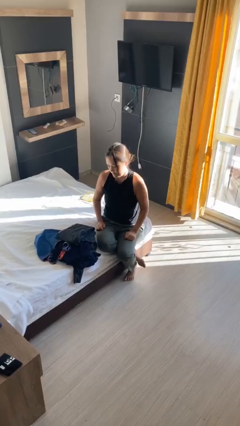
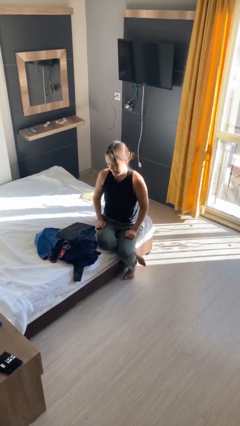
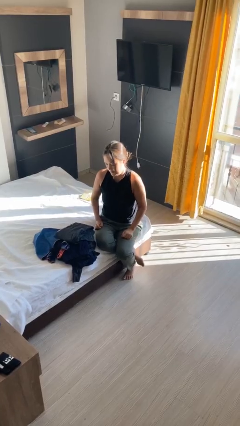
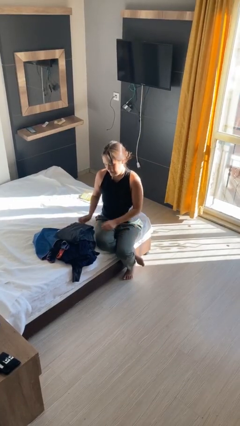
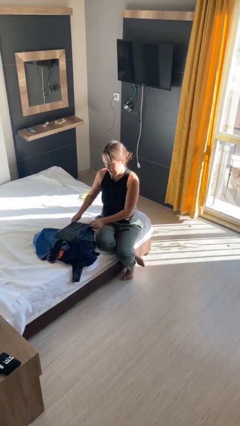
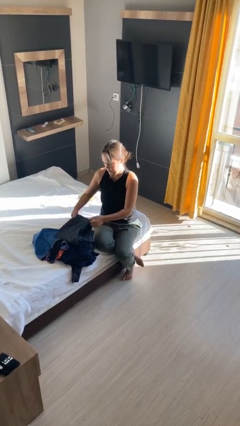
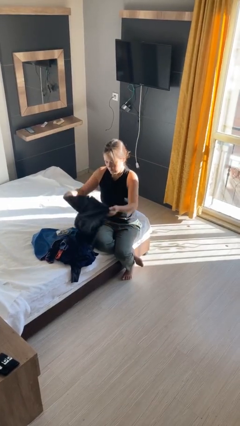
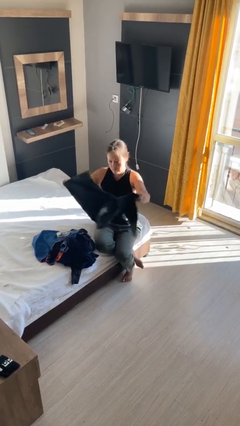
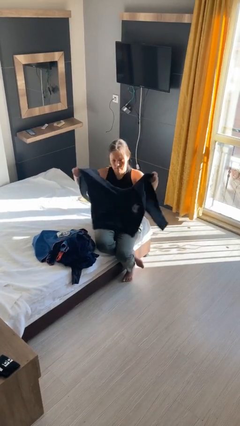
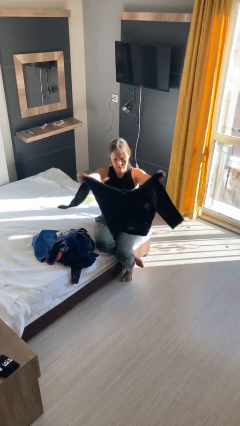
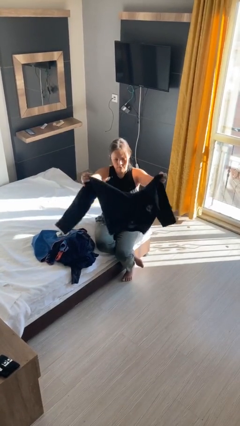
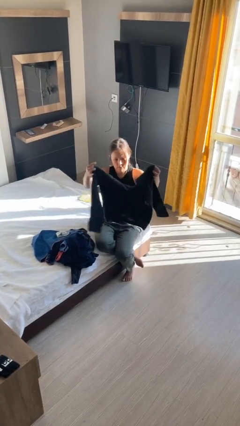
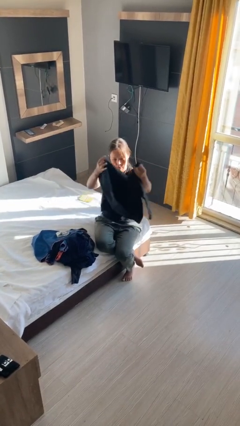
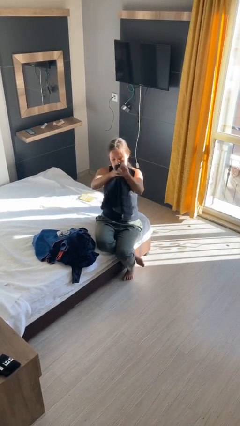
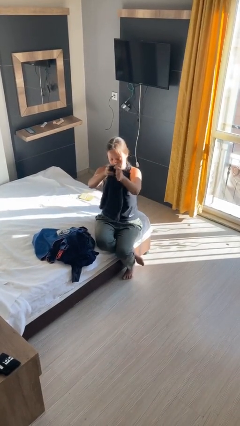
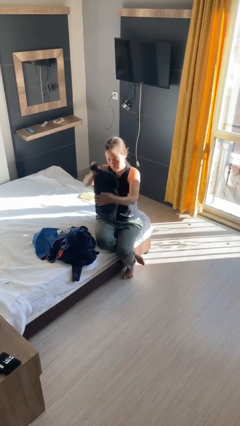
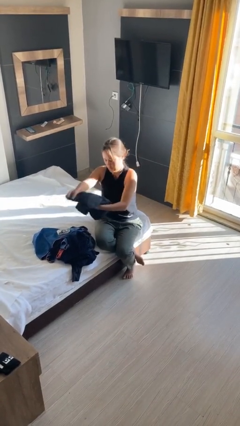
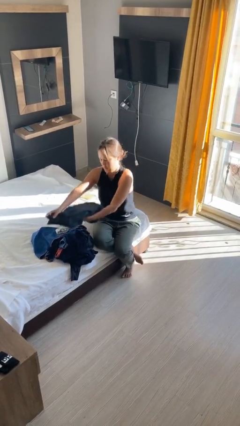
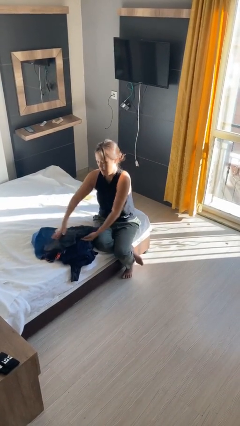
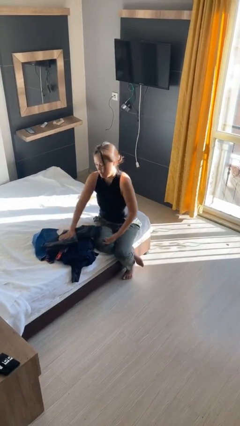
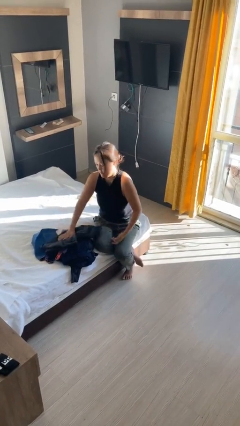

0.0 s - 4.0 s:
person folds pants

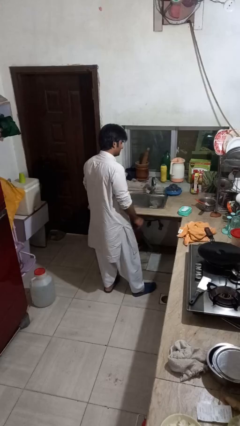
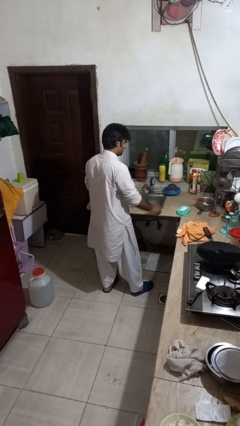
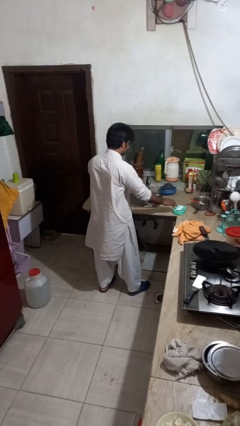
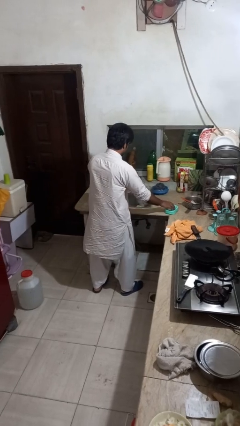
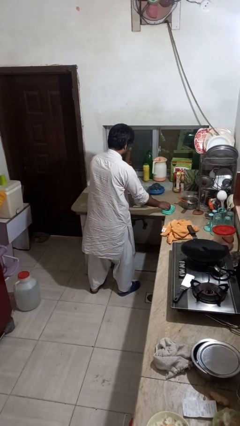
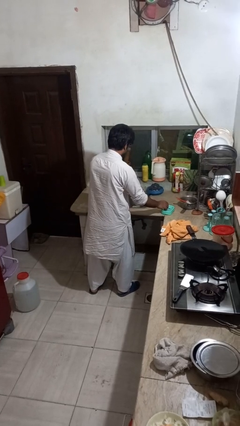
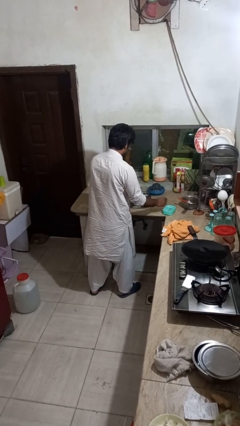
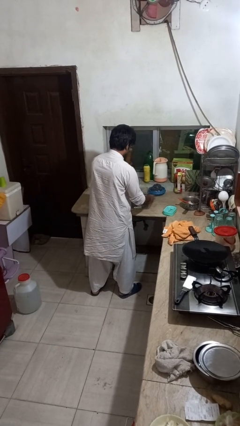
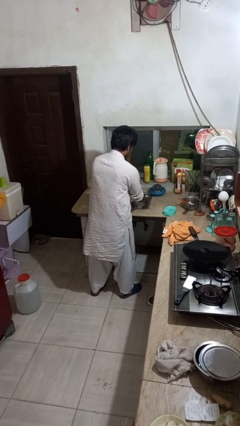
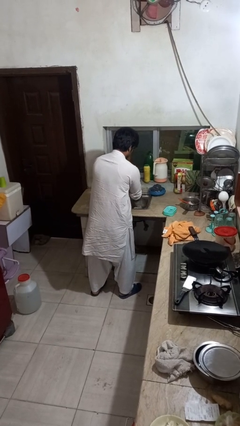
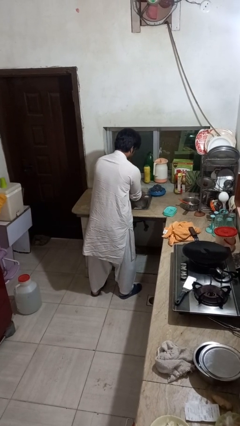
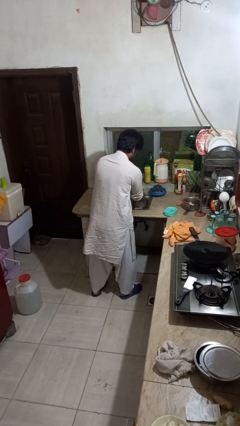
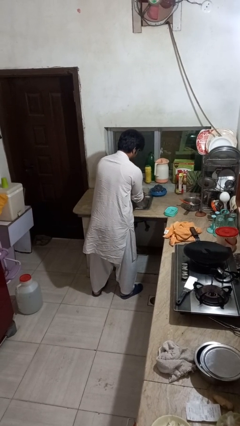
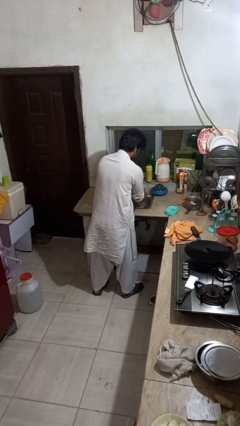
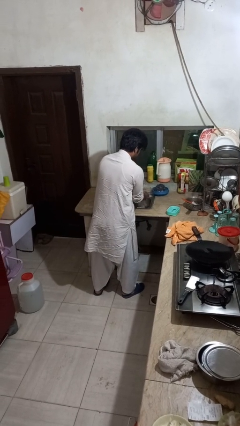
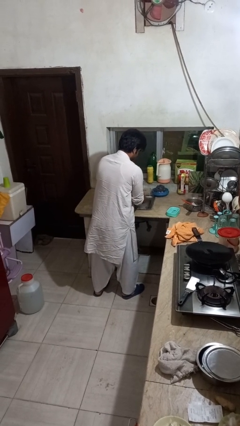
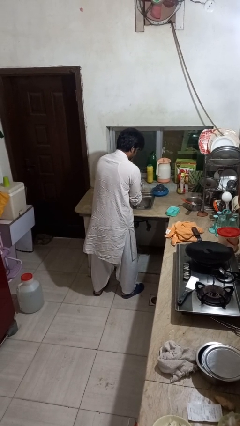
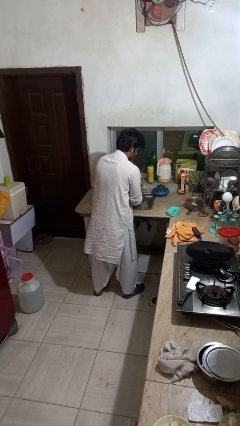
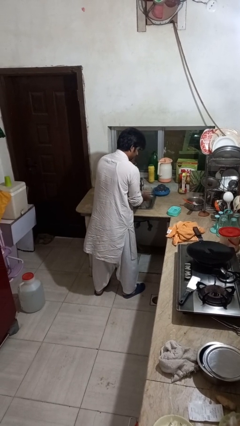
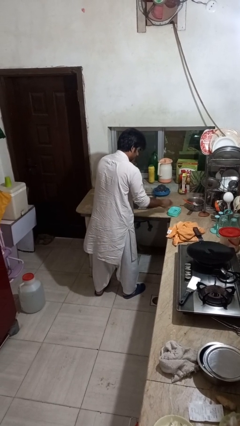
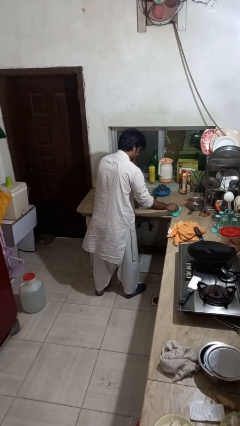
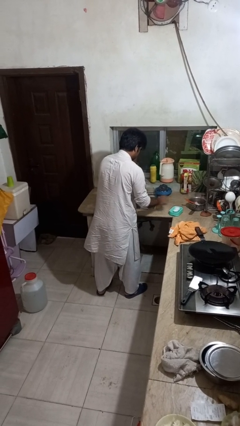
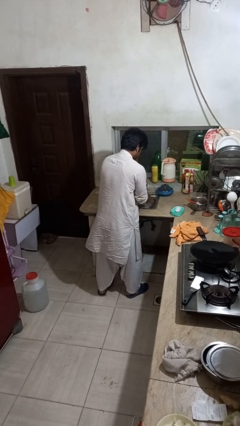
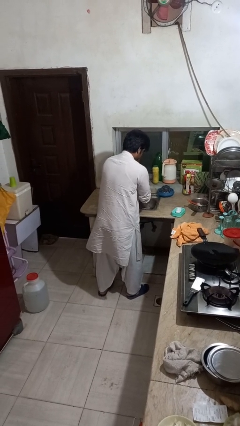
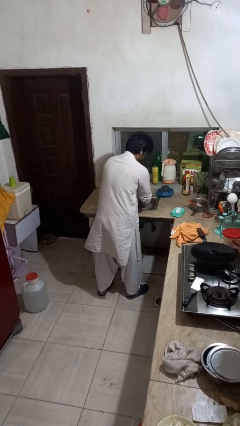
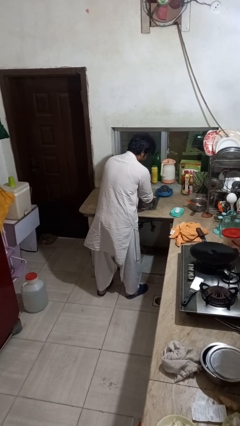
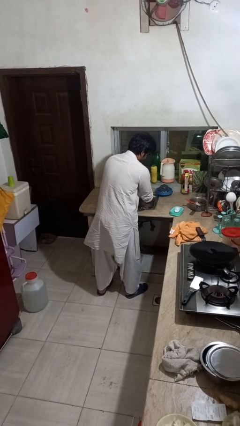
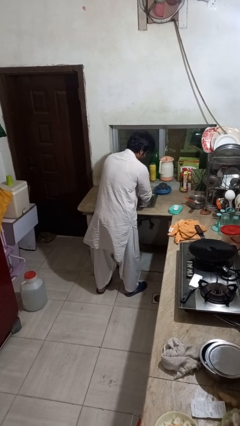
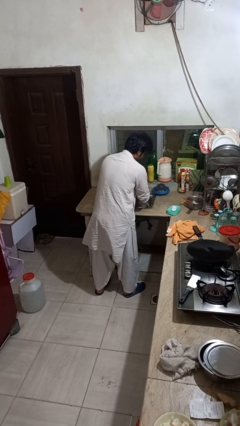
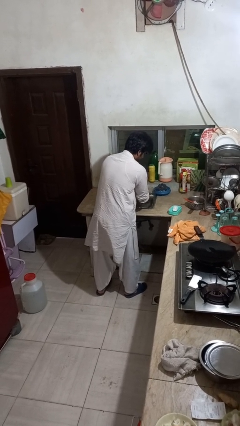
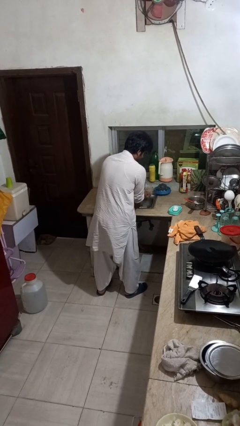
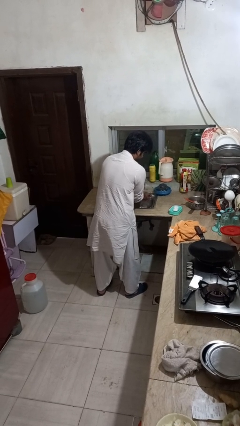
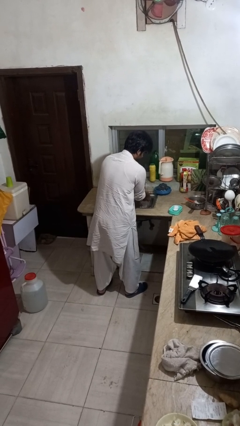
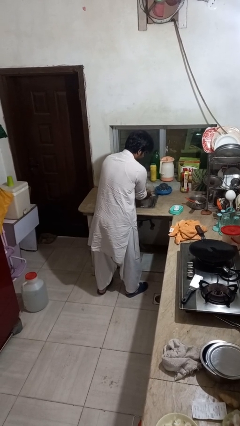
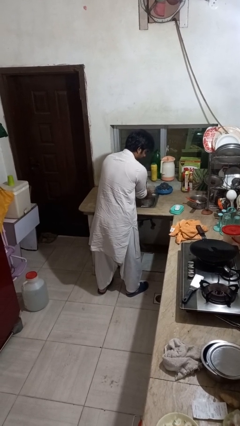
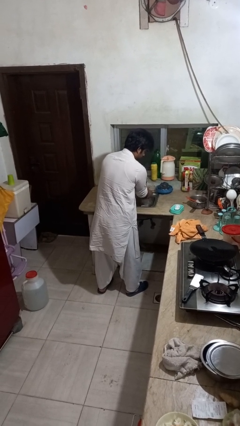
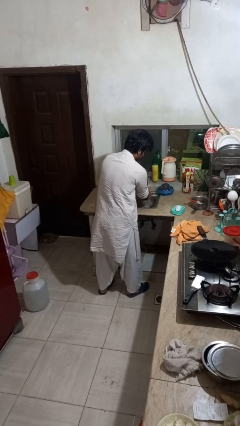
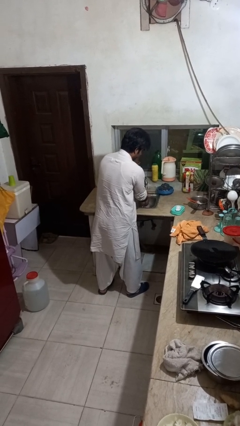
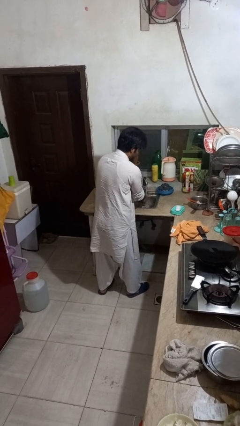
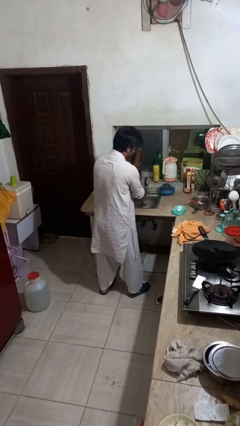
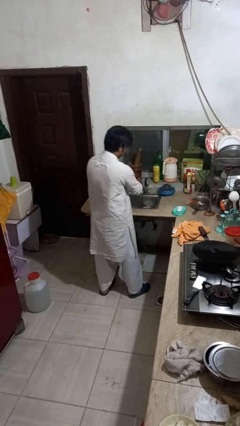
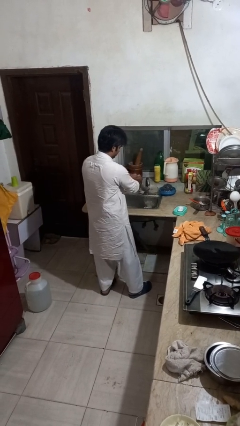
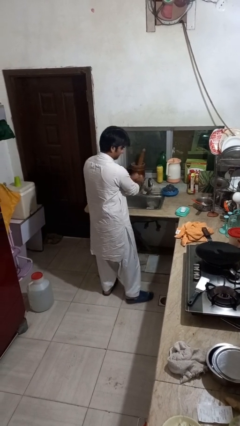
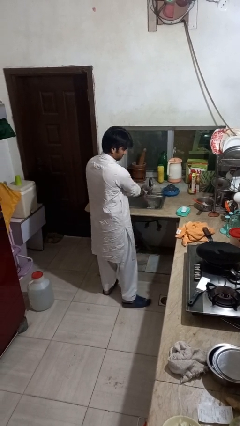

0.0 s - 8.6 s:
person washes hands

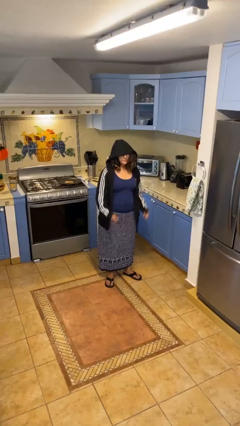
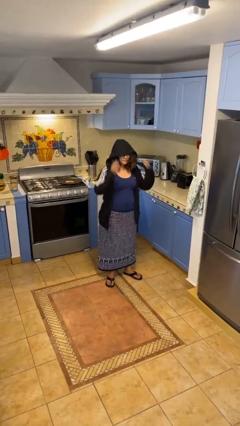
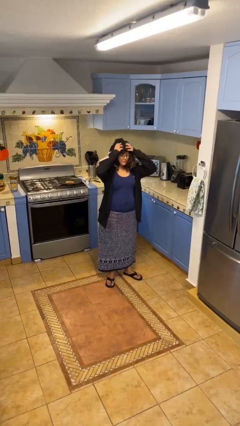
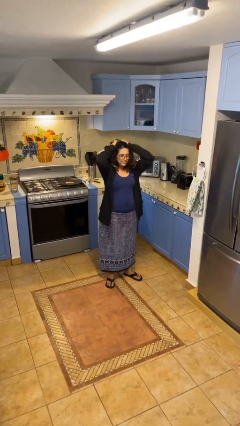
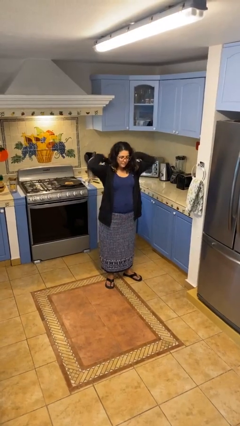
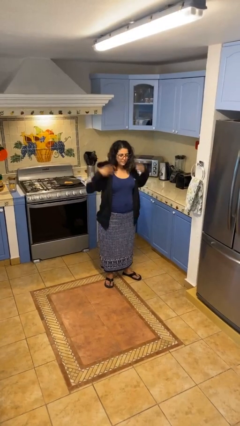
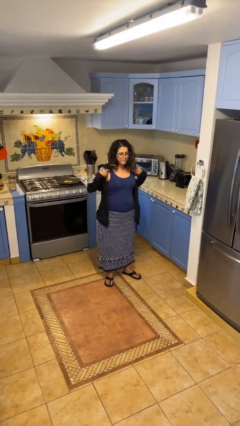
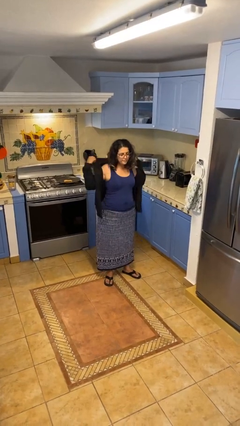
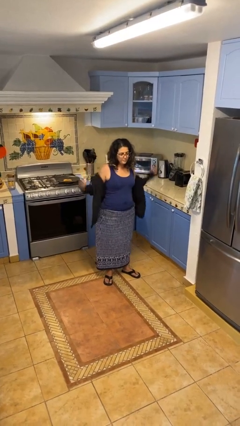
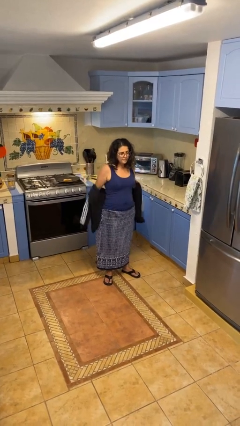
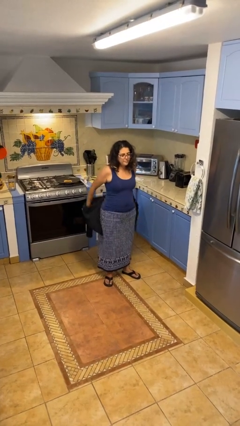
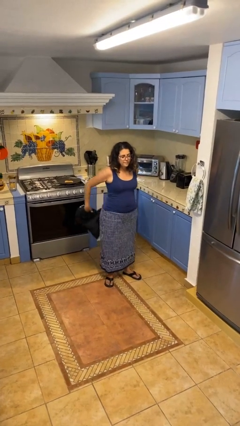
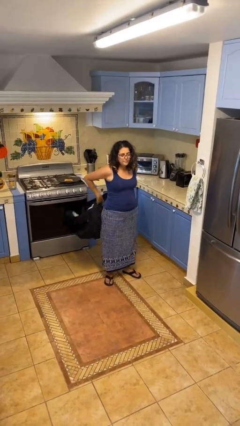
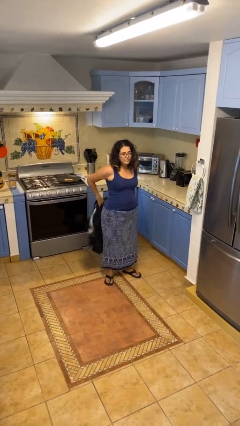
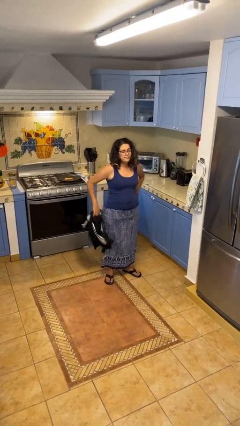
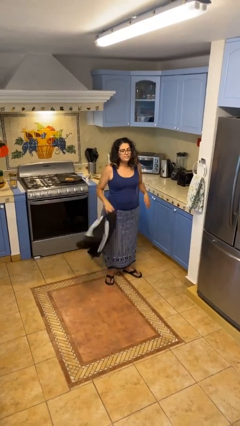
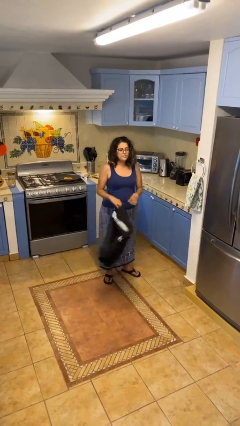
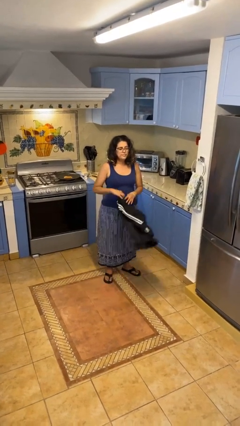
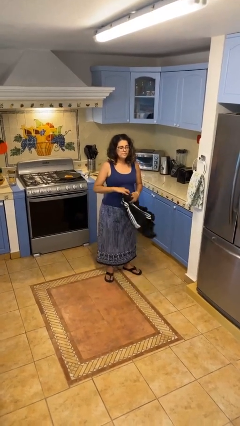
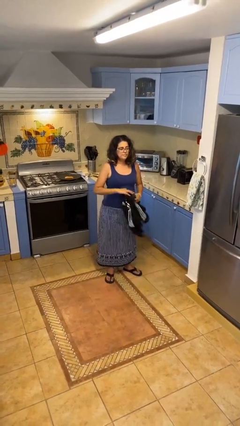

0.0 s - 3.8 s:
person takes off hoodie

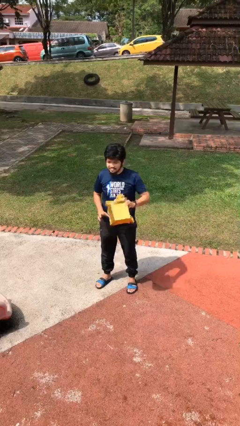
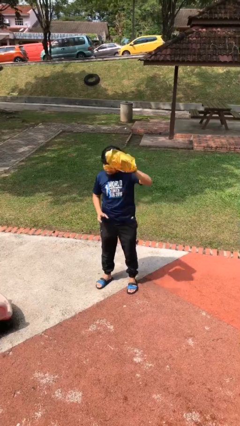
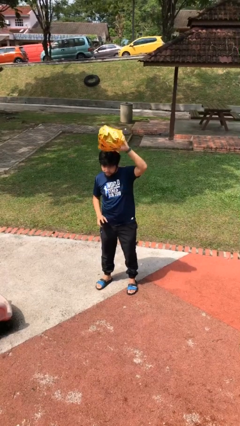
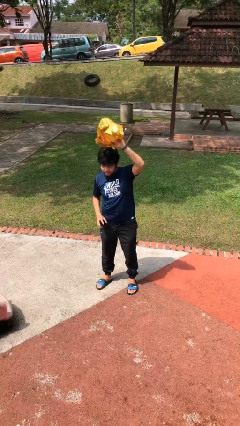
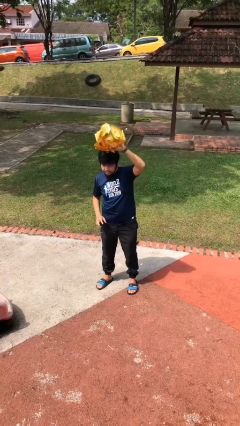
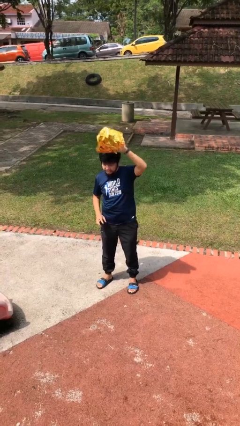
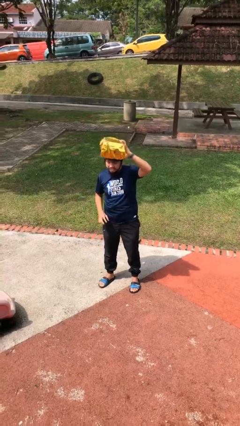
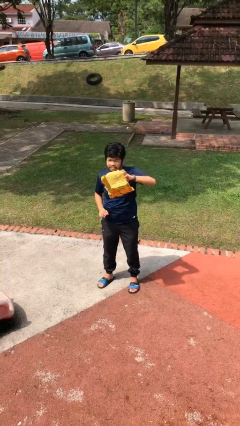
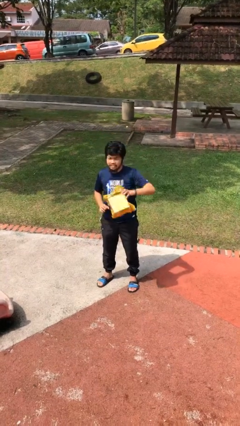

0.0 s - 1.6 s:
person holds object above head

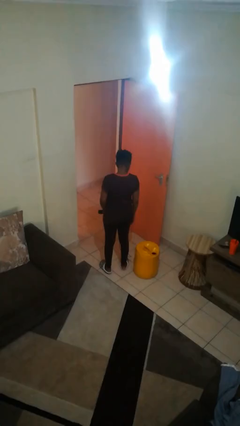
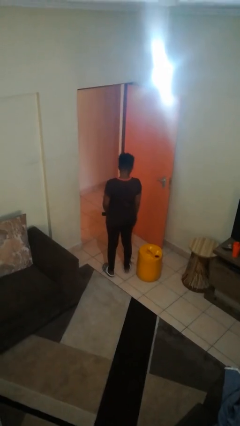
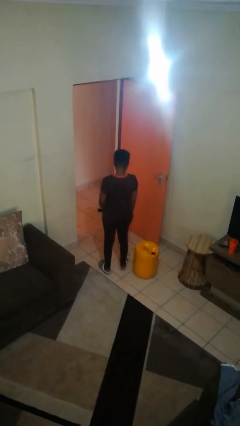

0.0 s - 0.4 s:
person takes off headphones
